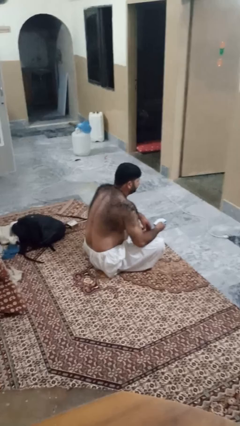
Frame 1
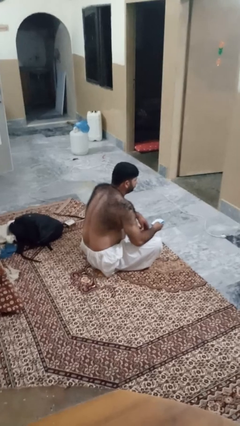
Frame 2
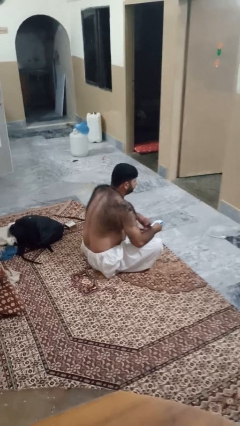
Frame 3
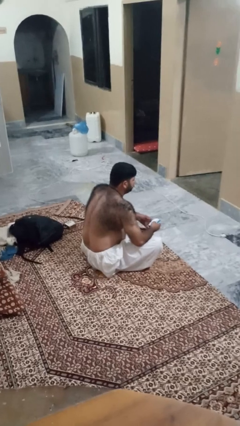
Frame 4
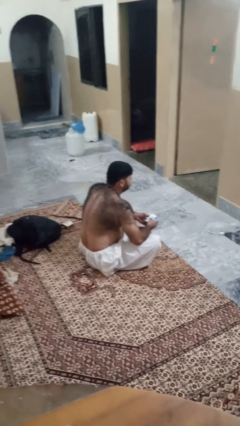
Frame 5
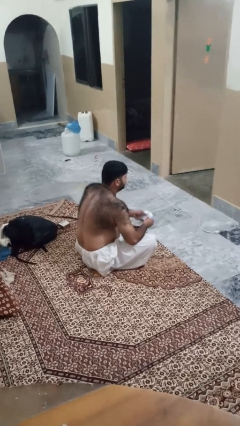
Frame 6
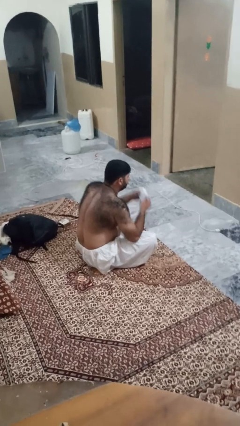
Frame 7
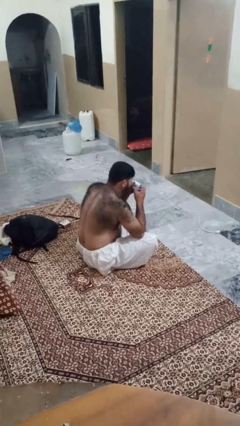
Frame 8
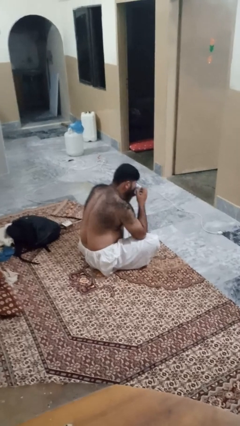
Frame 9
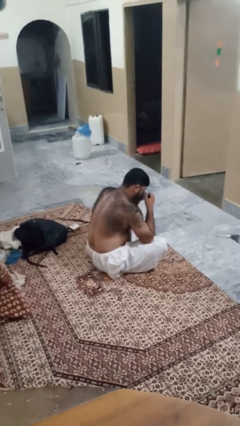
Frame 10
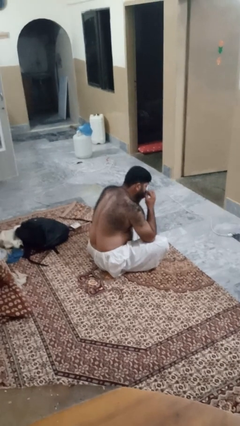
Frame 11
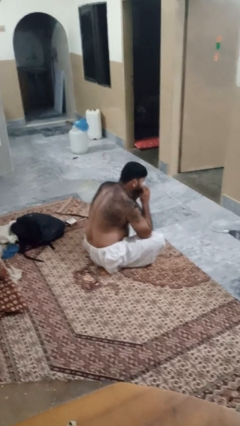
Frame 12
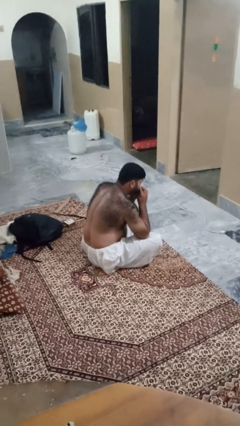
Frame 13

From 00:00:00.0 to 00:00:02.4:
person blows nose

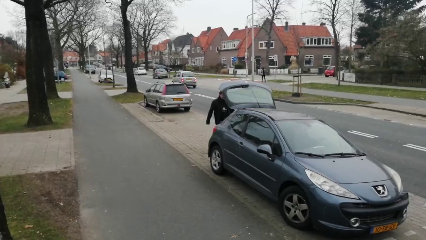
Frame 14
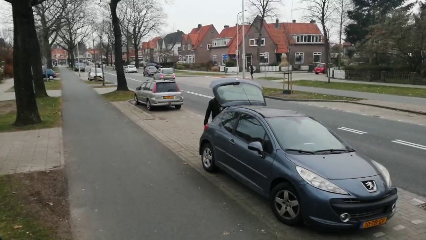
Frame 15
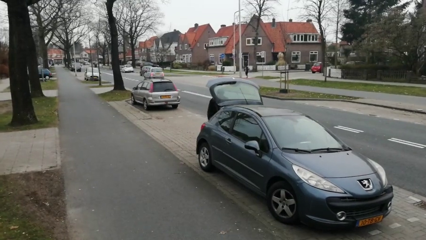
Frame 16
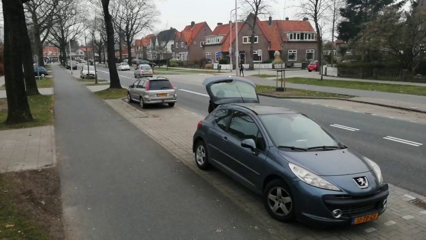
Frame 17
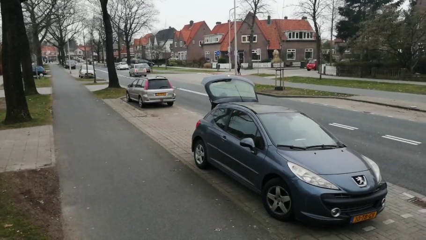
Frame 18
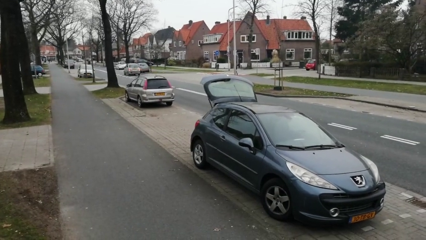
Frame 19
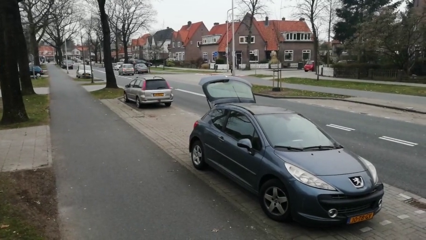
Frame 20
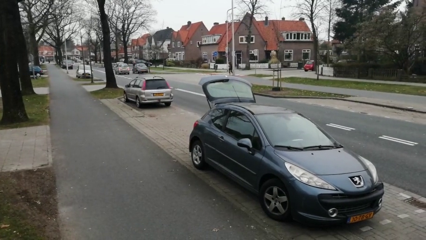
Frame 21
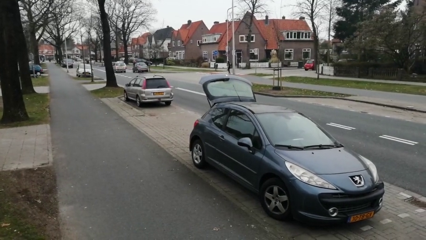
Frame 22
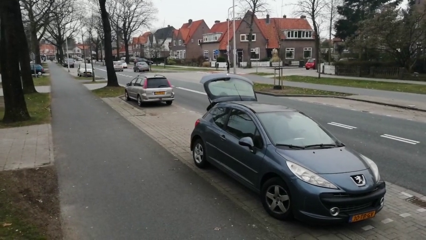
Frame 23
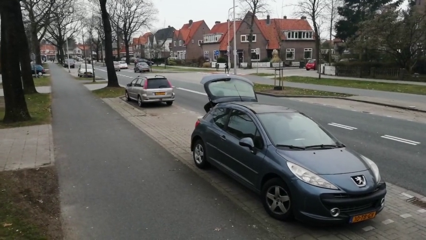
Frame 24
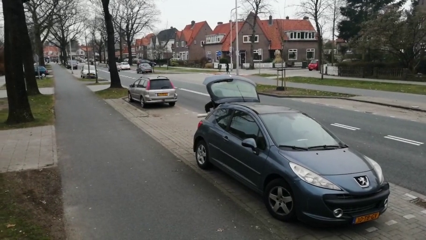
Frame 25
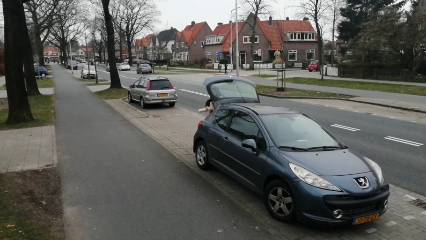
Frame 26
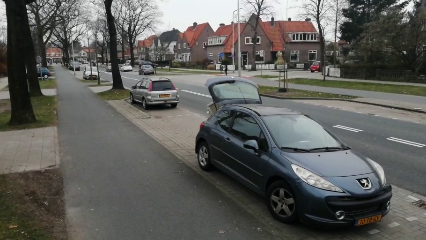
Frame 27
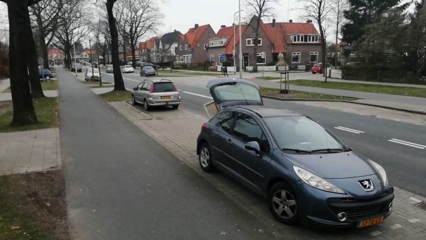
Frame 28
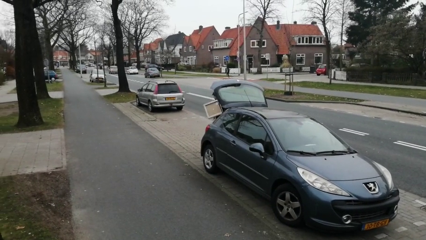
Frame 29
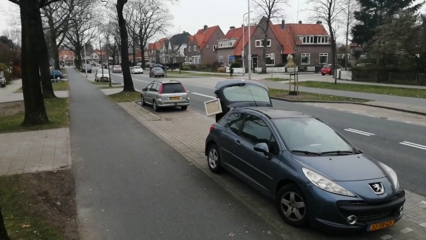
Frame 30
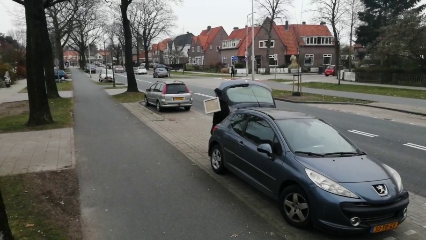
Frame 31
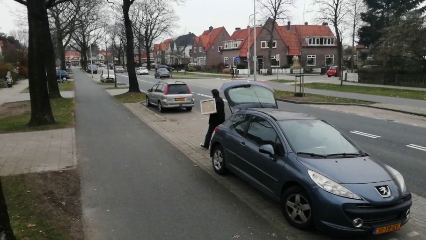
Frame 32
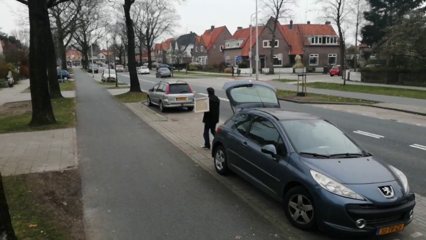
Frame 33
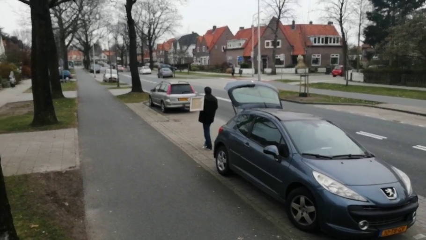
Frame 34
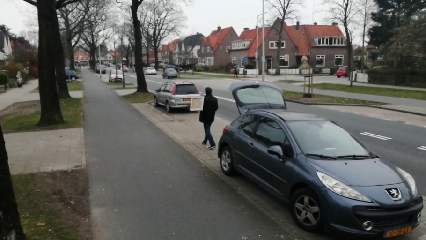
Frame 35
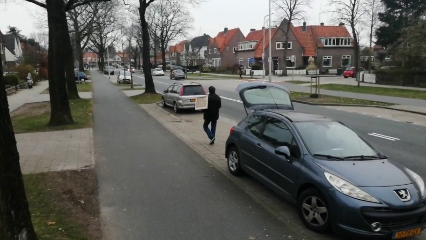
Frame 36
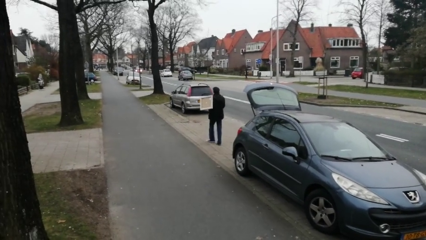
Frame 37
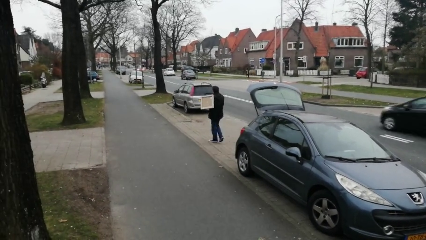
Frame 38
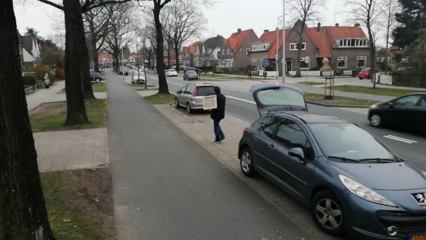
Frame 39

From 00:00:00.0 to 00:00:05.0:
person unloads car

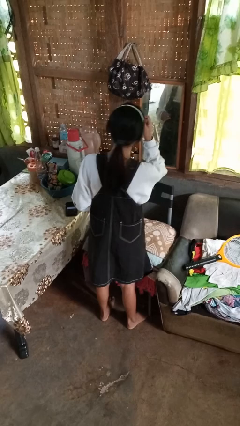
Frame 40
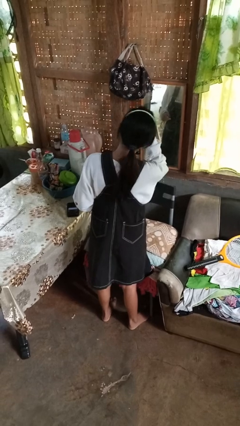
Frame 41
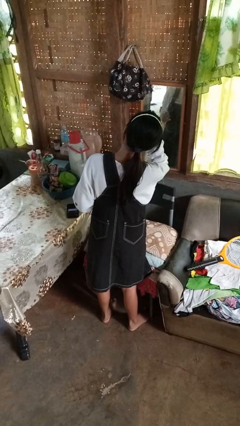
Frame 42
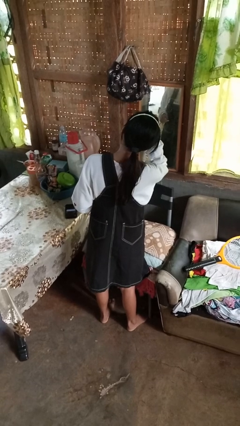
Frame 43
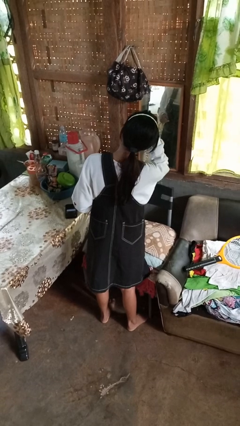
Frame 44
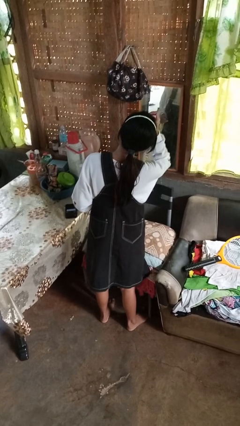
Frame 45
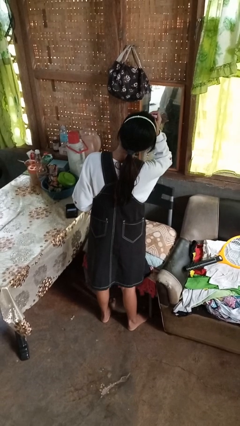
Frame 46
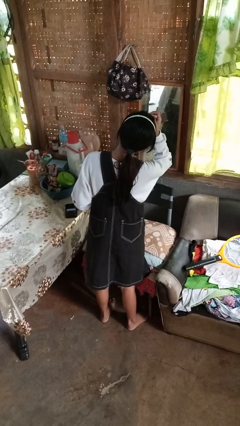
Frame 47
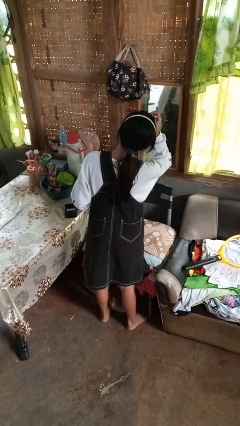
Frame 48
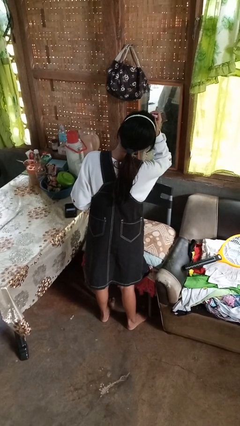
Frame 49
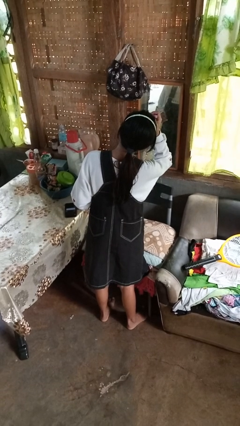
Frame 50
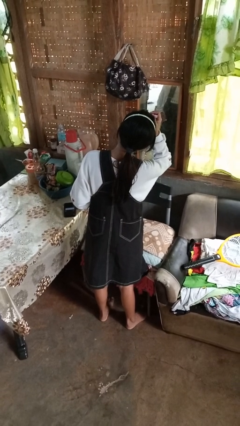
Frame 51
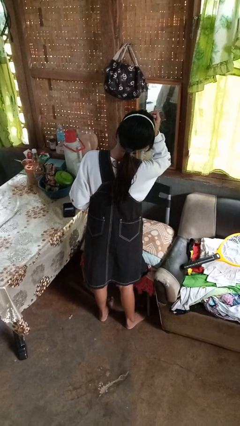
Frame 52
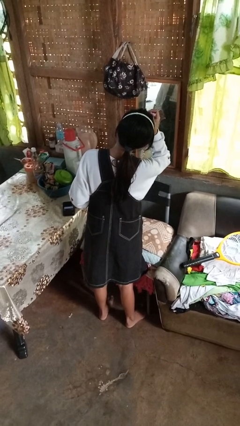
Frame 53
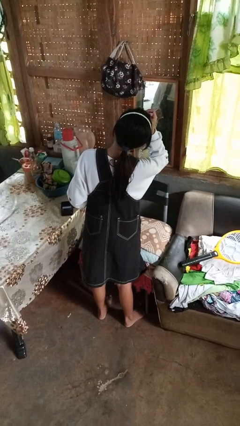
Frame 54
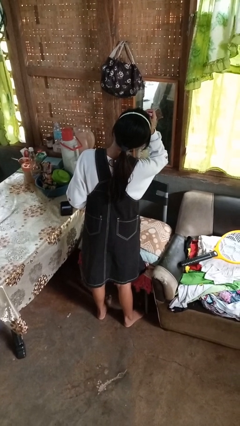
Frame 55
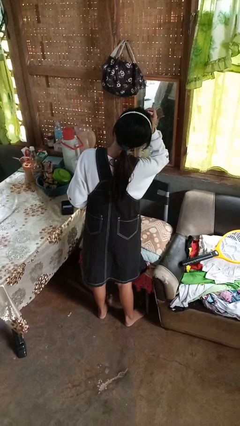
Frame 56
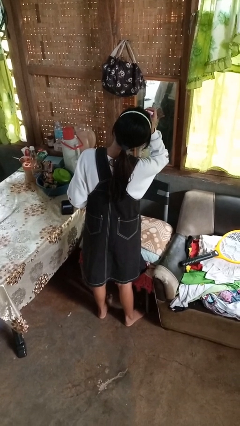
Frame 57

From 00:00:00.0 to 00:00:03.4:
person applies eye makeup

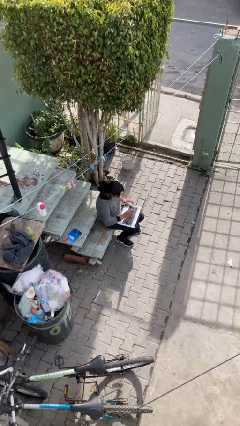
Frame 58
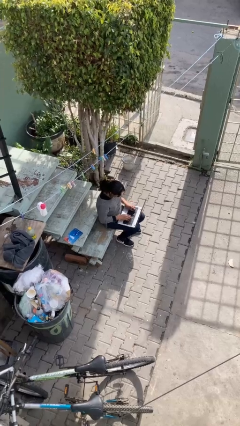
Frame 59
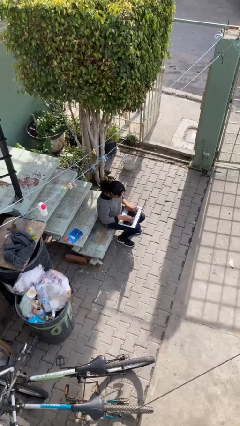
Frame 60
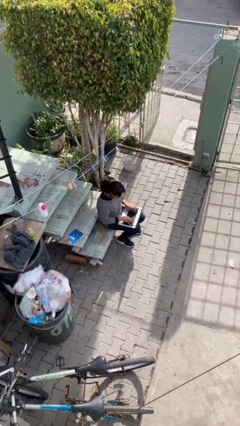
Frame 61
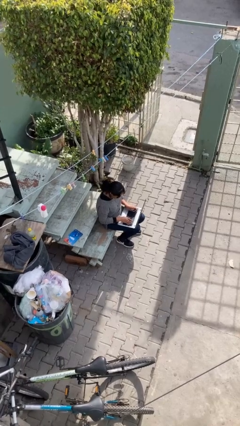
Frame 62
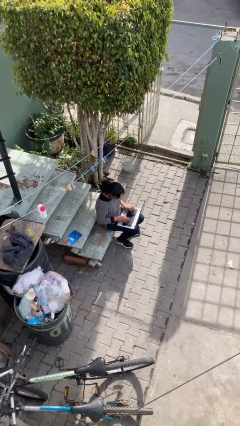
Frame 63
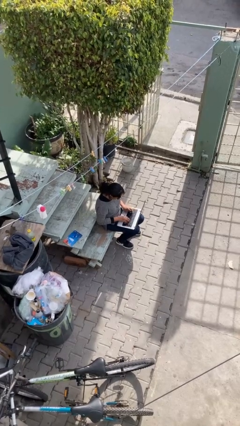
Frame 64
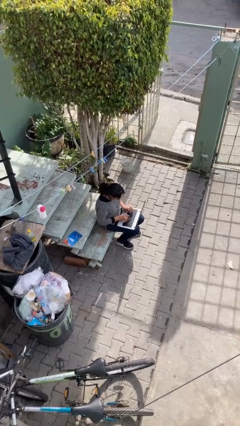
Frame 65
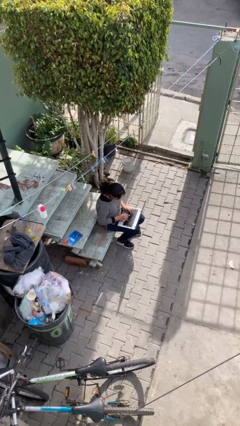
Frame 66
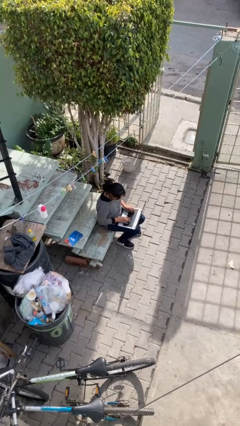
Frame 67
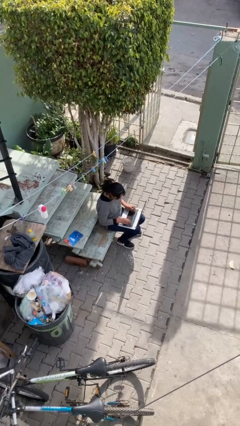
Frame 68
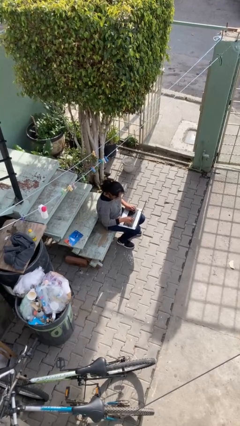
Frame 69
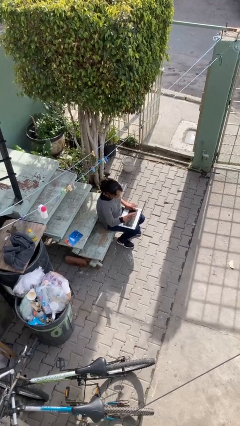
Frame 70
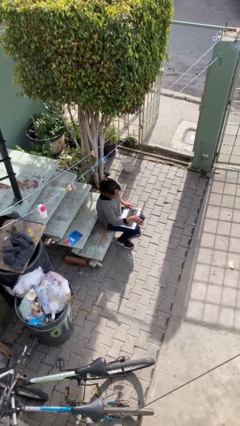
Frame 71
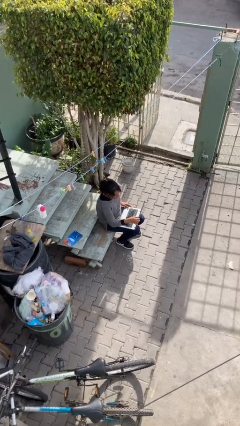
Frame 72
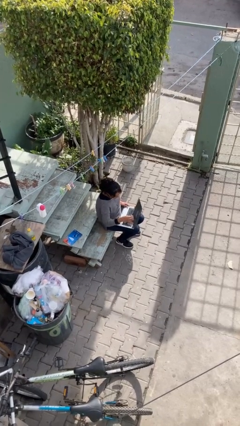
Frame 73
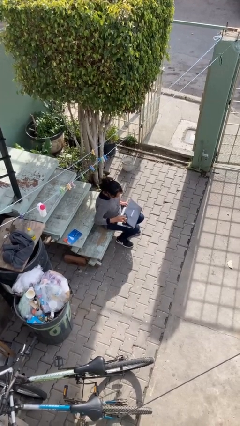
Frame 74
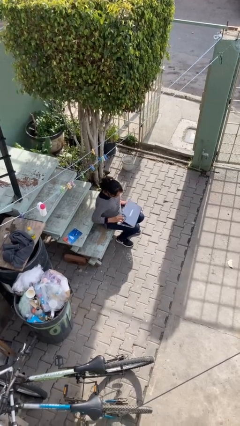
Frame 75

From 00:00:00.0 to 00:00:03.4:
person interacts with laptop

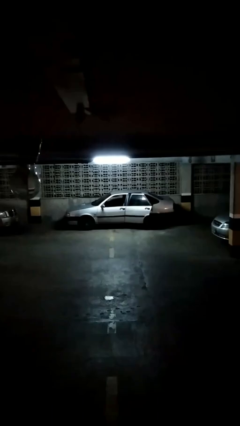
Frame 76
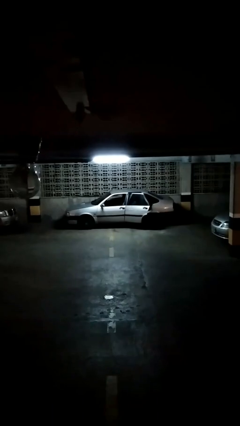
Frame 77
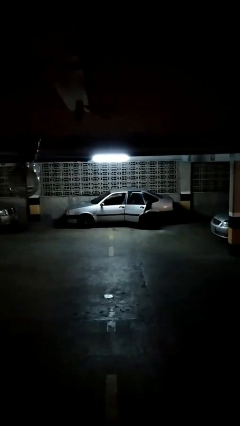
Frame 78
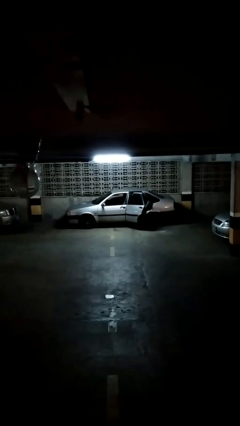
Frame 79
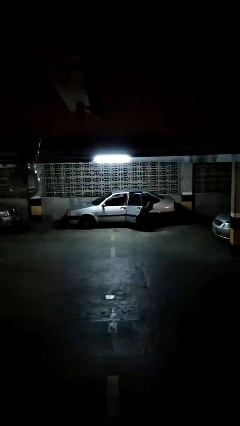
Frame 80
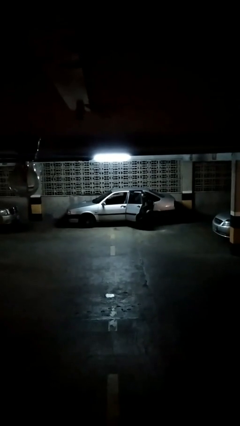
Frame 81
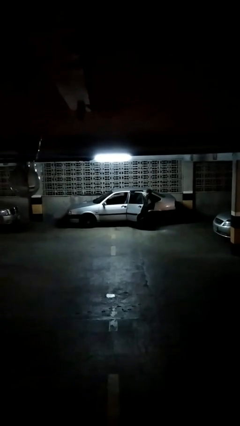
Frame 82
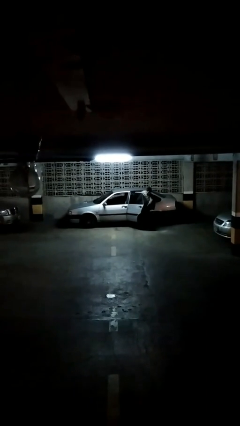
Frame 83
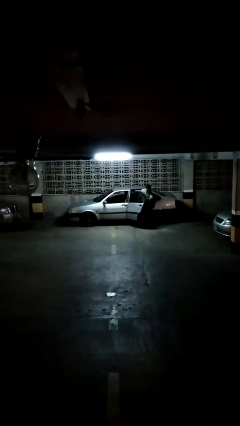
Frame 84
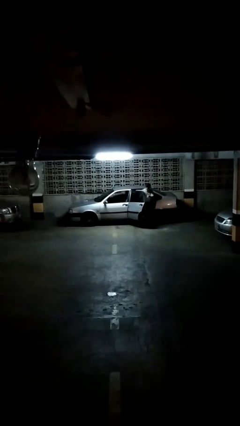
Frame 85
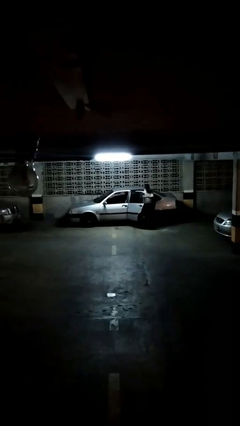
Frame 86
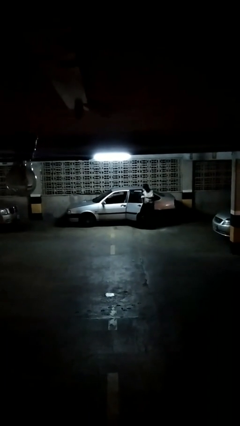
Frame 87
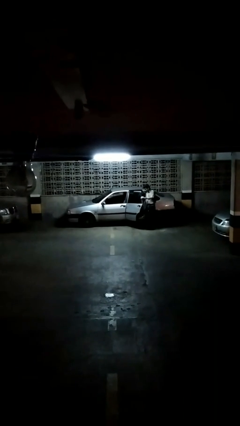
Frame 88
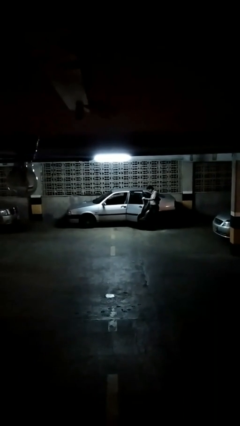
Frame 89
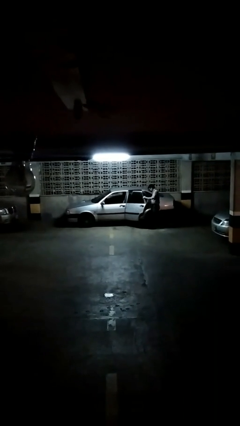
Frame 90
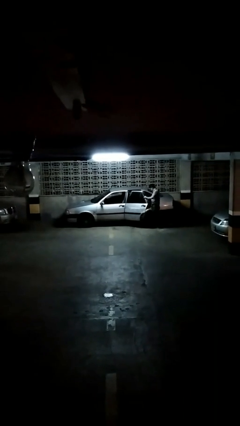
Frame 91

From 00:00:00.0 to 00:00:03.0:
car drops off person

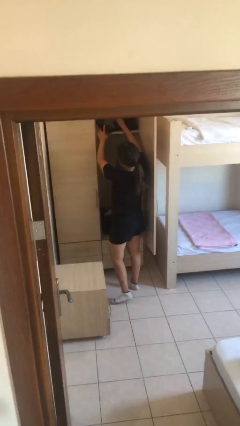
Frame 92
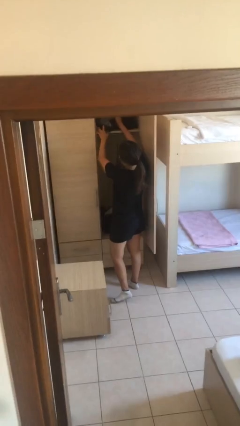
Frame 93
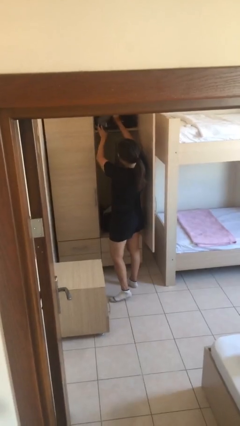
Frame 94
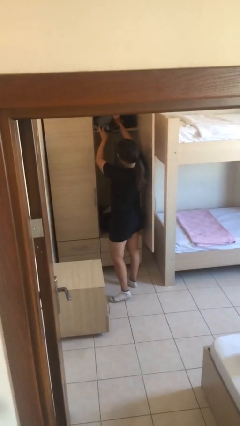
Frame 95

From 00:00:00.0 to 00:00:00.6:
person picks up object from shelf
